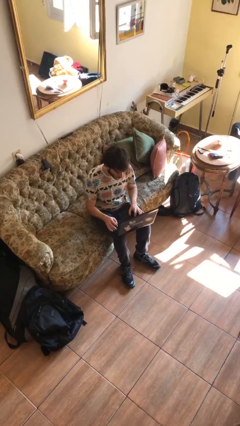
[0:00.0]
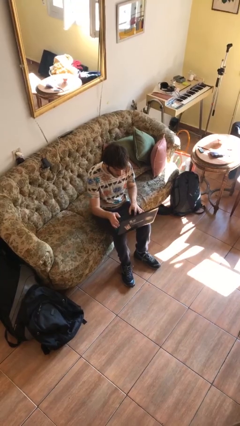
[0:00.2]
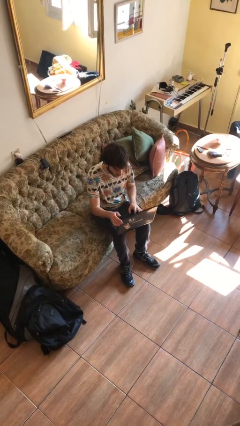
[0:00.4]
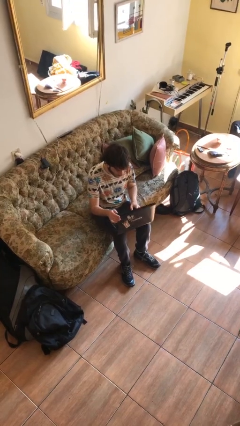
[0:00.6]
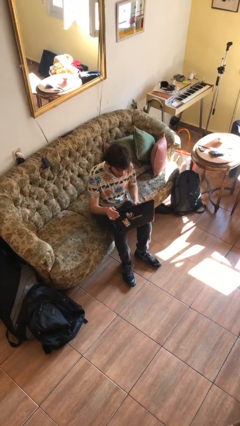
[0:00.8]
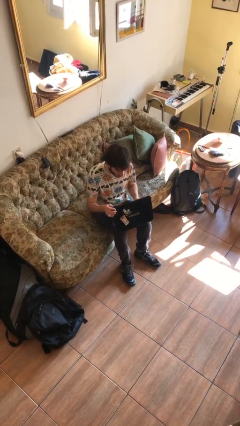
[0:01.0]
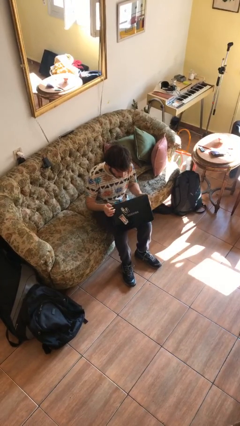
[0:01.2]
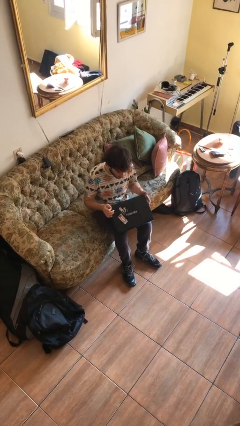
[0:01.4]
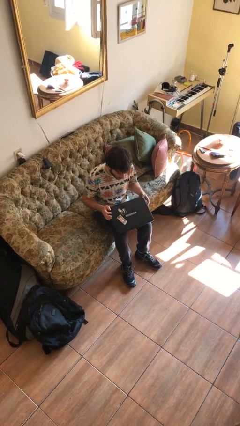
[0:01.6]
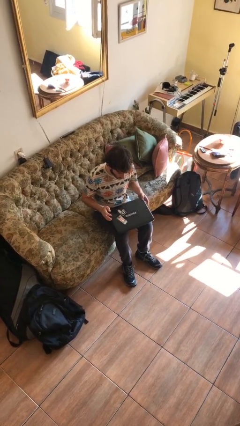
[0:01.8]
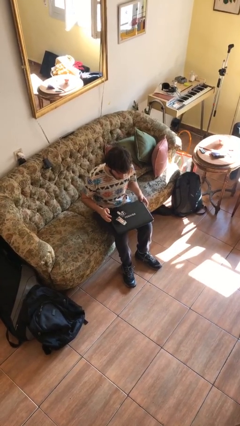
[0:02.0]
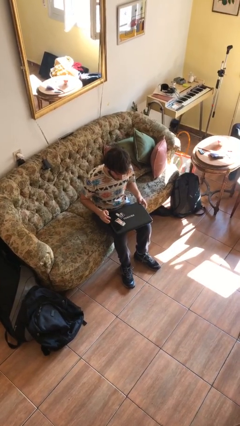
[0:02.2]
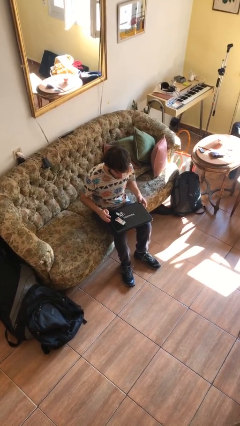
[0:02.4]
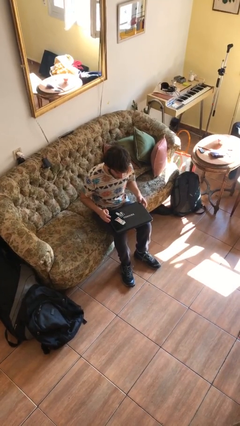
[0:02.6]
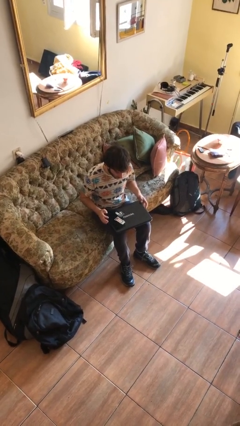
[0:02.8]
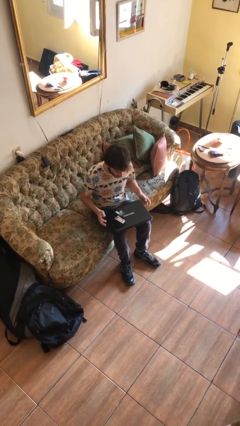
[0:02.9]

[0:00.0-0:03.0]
person closes laptop

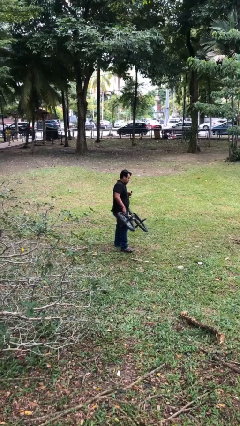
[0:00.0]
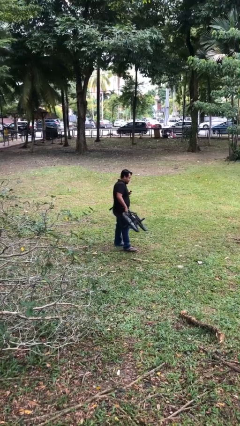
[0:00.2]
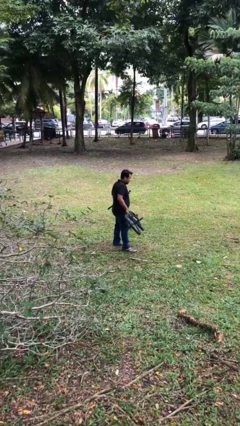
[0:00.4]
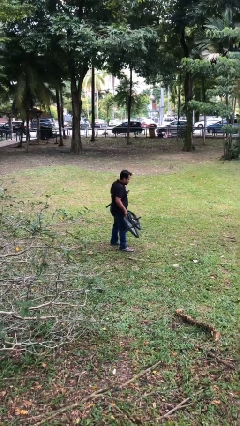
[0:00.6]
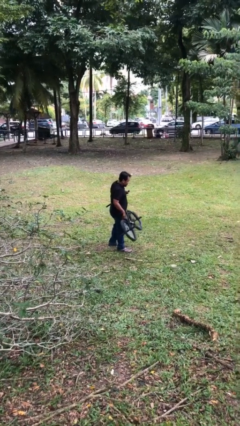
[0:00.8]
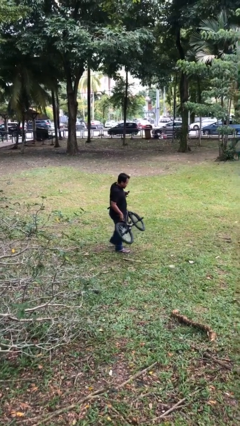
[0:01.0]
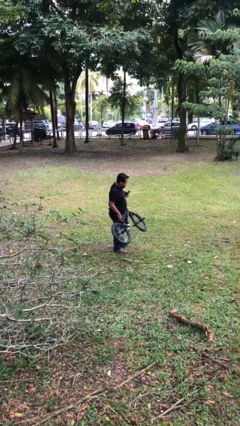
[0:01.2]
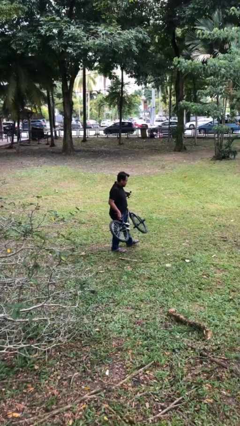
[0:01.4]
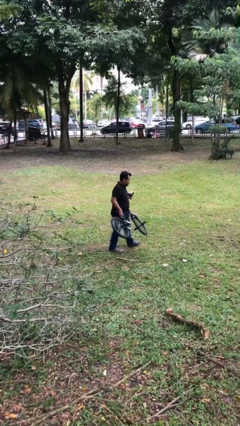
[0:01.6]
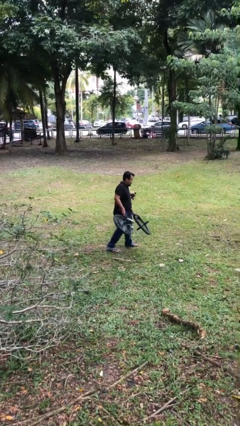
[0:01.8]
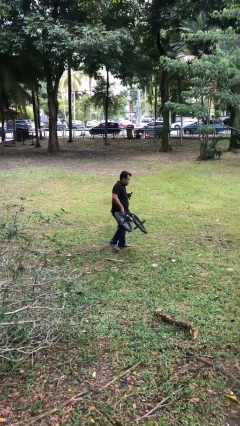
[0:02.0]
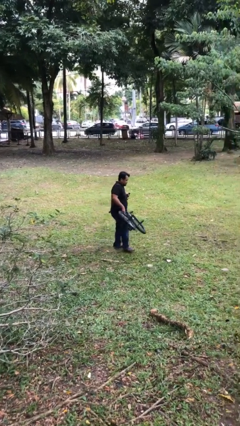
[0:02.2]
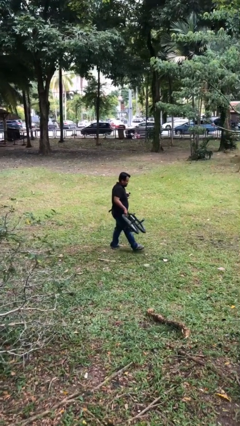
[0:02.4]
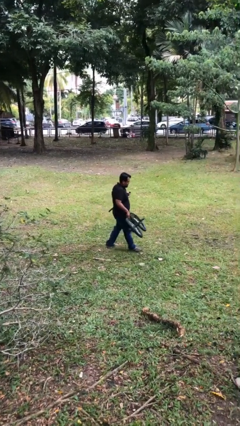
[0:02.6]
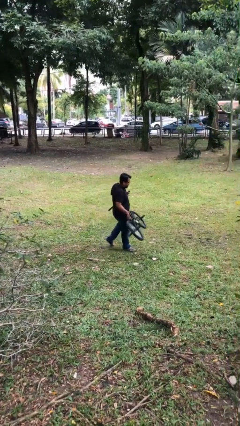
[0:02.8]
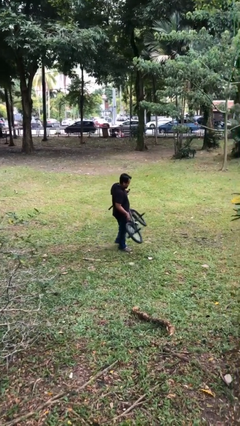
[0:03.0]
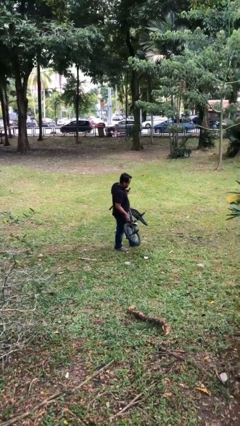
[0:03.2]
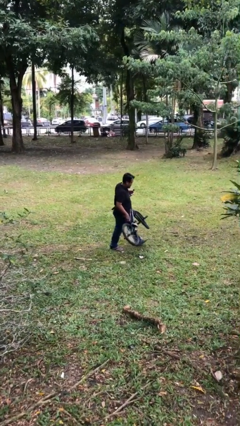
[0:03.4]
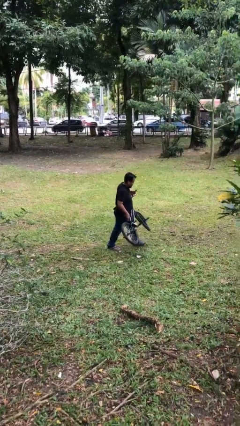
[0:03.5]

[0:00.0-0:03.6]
person carries heavy object

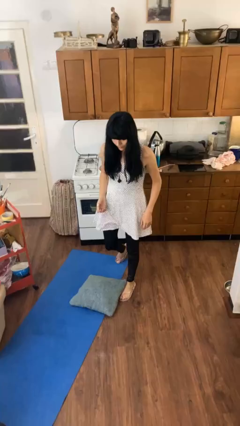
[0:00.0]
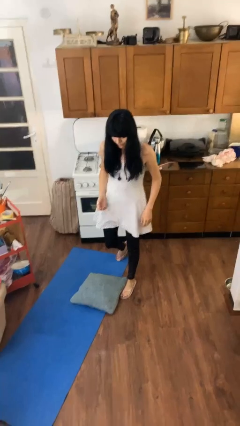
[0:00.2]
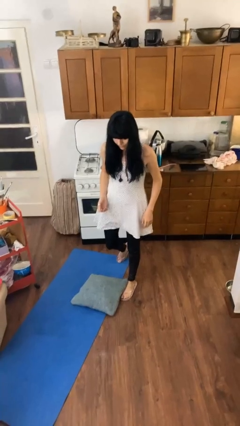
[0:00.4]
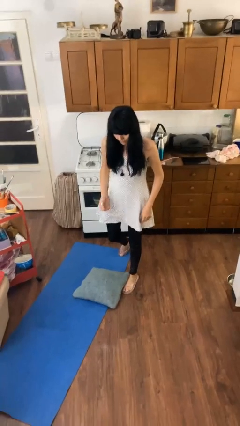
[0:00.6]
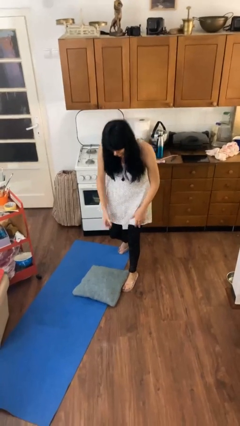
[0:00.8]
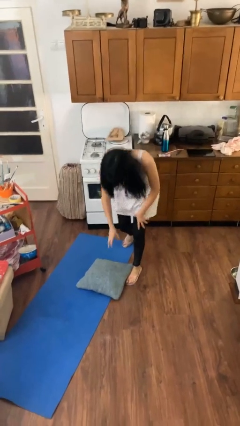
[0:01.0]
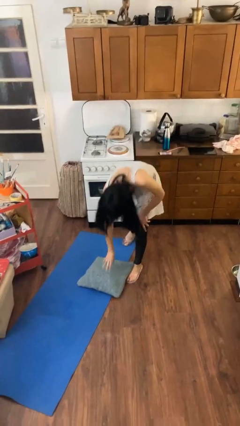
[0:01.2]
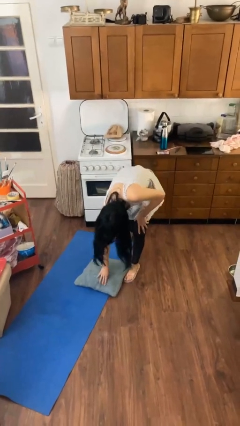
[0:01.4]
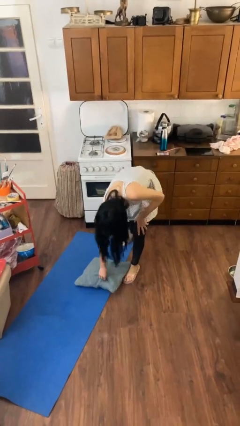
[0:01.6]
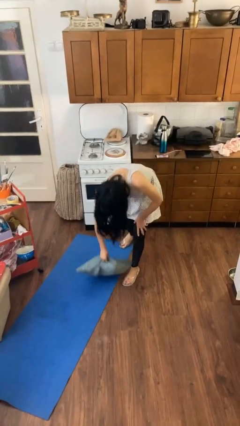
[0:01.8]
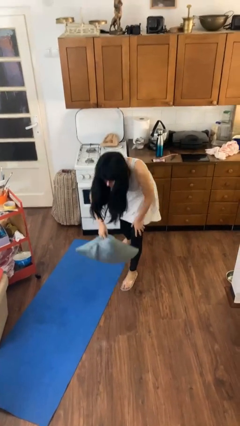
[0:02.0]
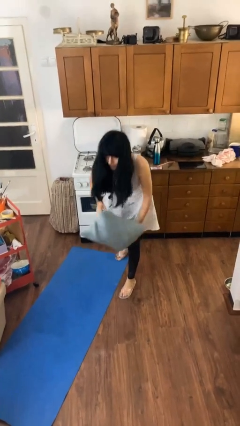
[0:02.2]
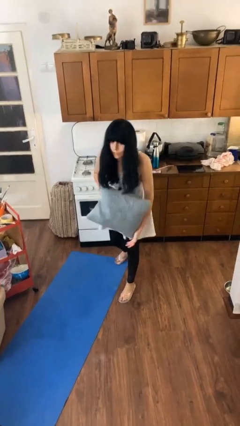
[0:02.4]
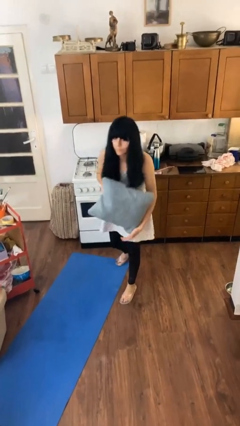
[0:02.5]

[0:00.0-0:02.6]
person picks up object from floor

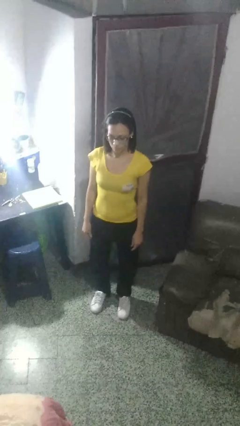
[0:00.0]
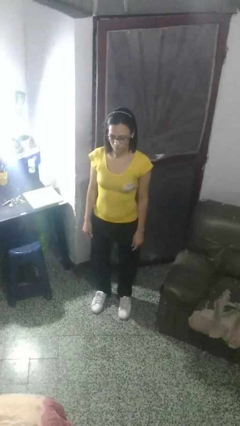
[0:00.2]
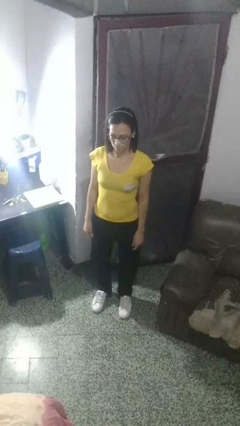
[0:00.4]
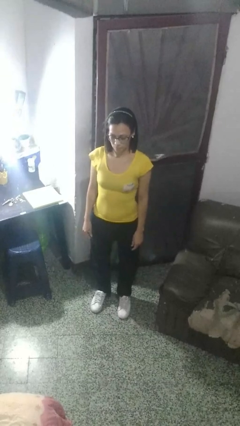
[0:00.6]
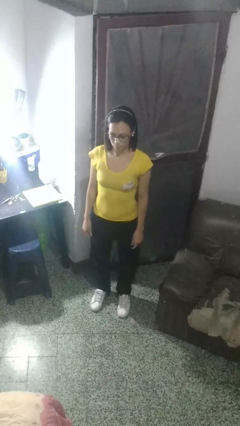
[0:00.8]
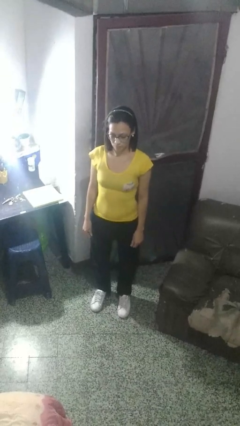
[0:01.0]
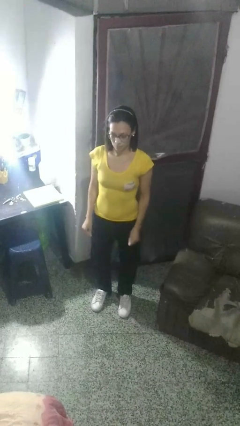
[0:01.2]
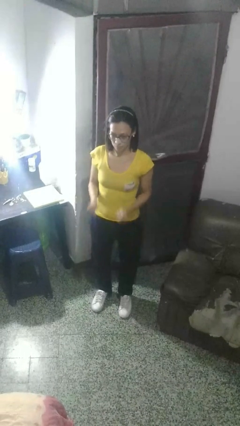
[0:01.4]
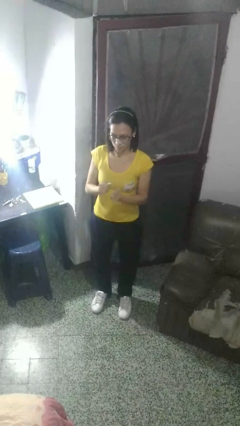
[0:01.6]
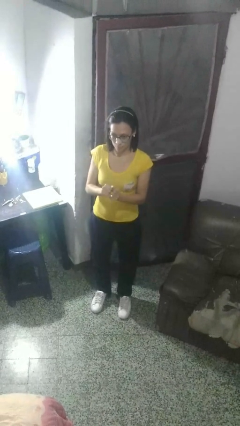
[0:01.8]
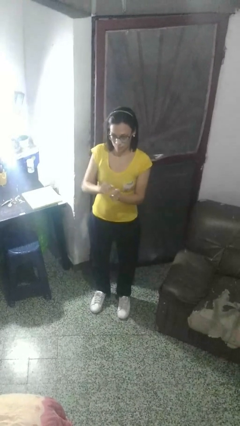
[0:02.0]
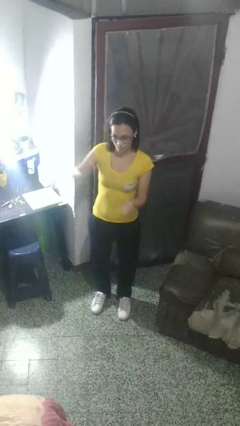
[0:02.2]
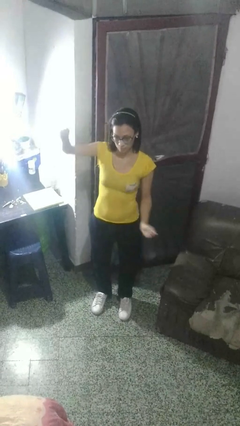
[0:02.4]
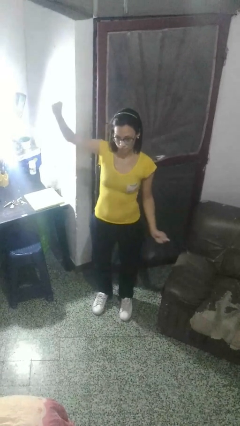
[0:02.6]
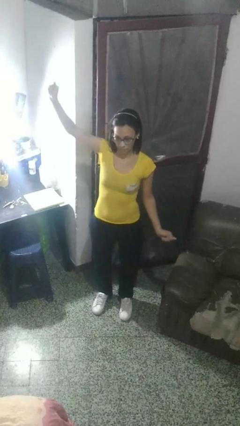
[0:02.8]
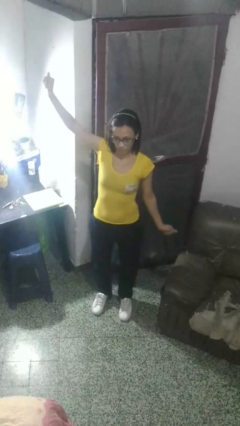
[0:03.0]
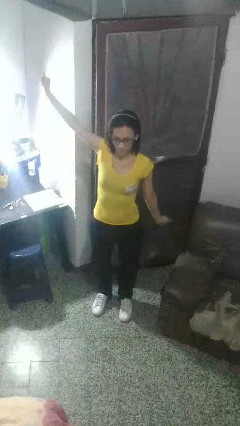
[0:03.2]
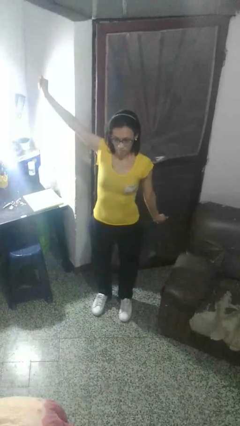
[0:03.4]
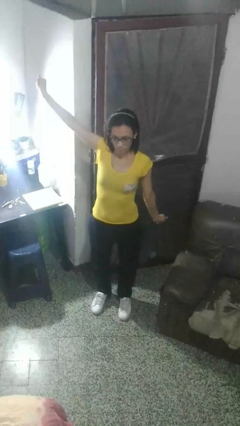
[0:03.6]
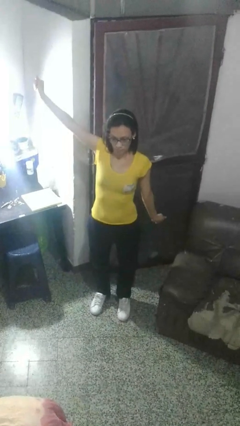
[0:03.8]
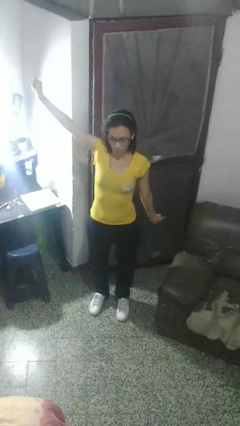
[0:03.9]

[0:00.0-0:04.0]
person gestures zoom in

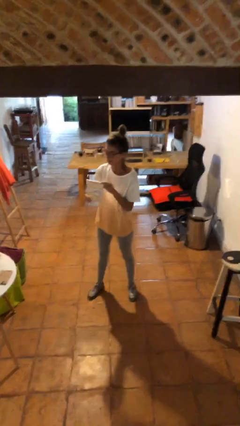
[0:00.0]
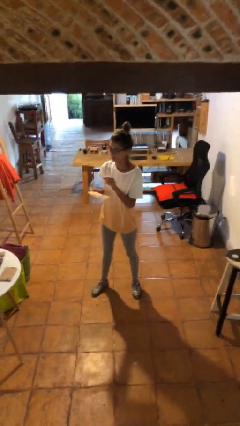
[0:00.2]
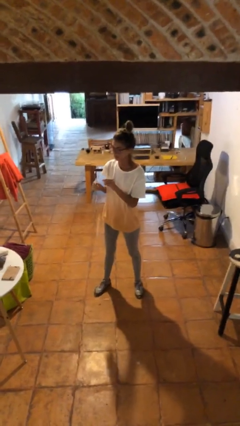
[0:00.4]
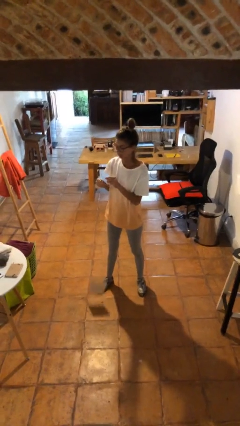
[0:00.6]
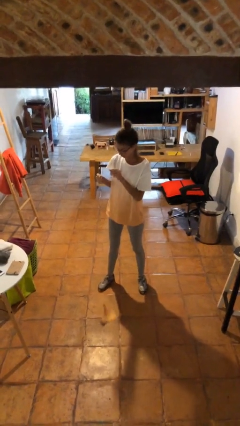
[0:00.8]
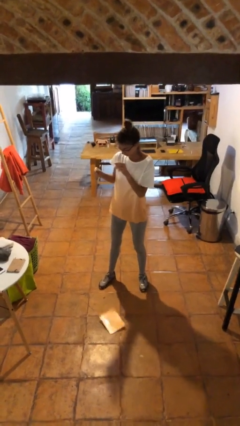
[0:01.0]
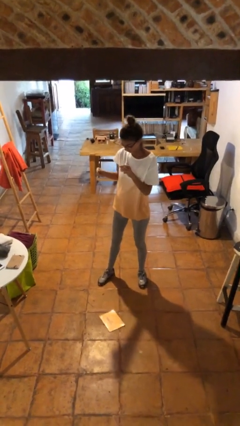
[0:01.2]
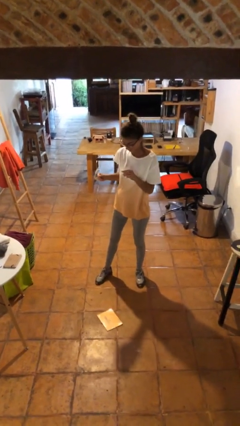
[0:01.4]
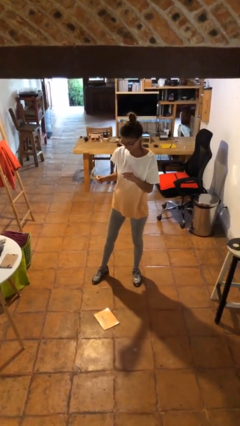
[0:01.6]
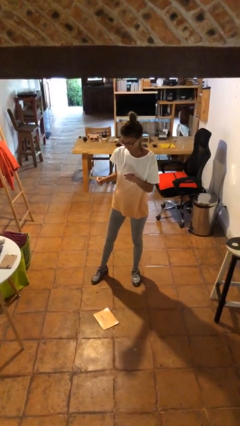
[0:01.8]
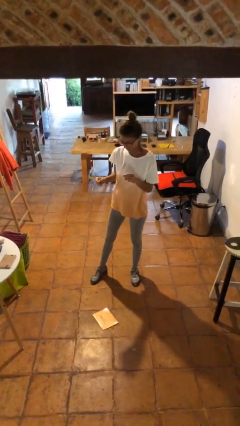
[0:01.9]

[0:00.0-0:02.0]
person drops object

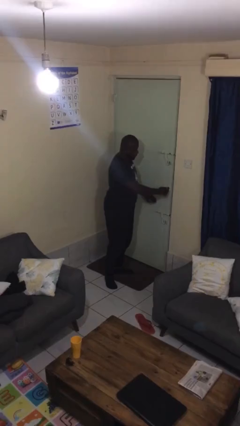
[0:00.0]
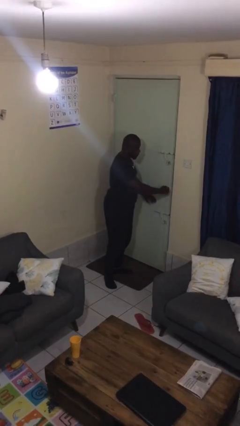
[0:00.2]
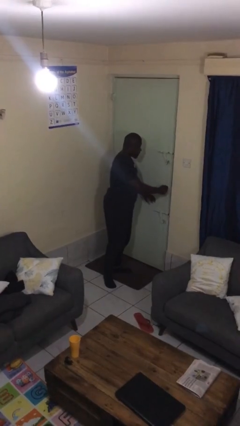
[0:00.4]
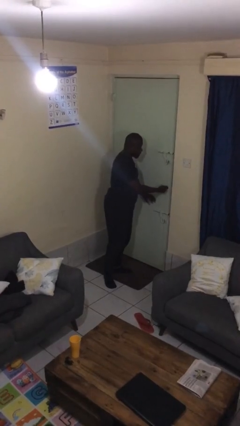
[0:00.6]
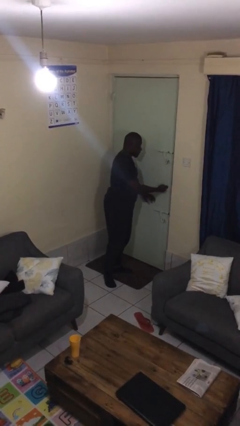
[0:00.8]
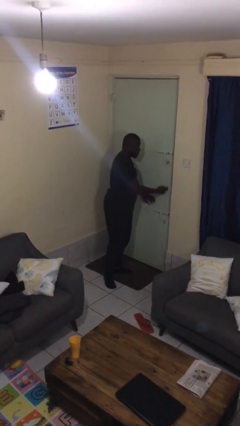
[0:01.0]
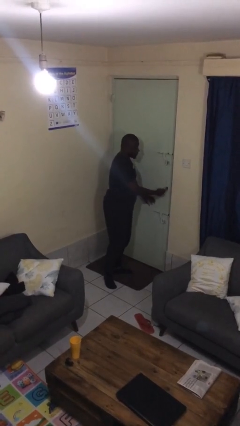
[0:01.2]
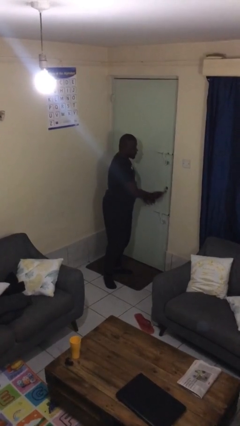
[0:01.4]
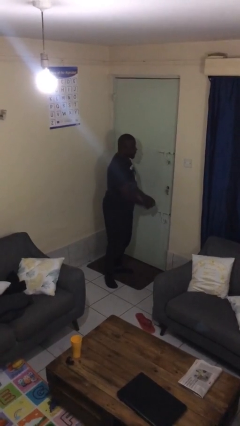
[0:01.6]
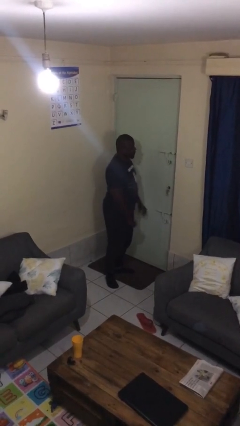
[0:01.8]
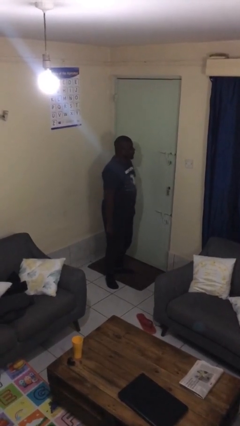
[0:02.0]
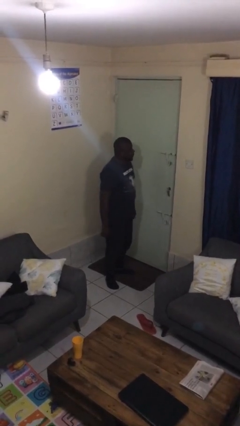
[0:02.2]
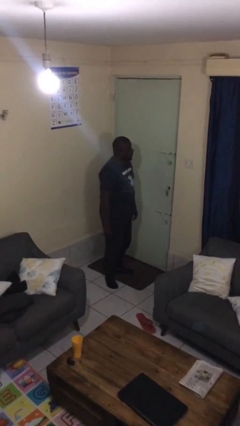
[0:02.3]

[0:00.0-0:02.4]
person locks door with keys
